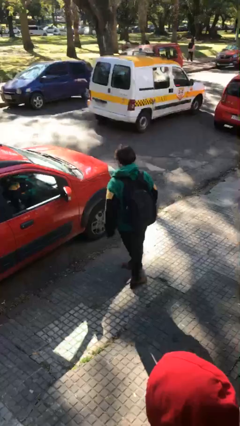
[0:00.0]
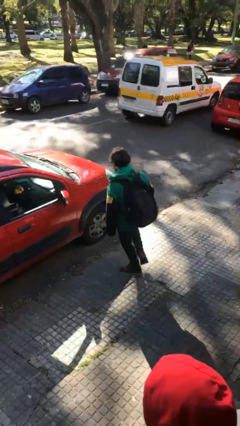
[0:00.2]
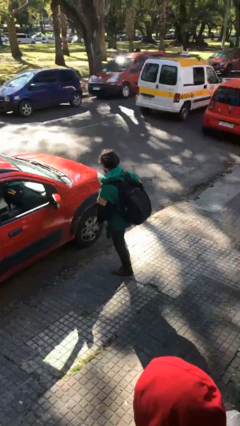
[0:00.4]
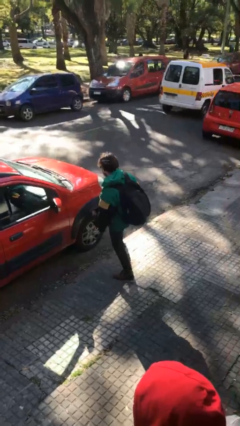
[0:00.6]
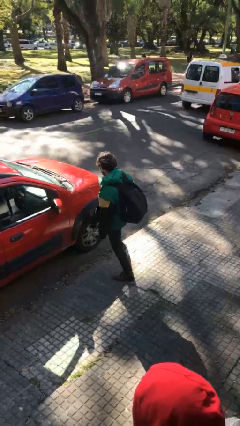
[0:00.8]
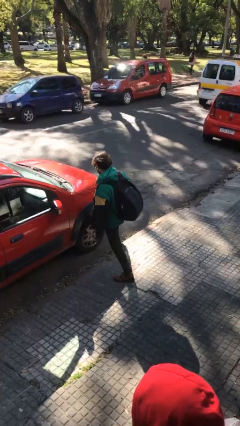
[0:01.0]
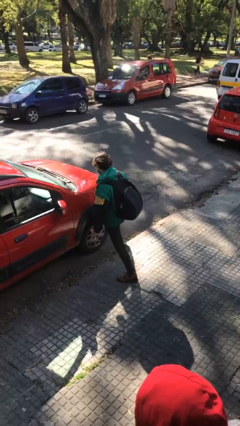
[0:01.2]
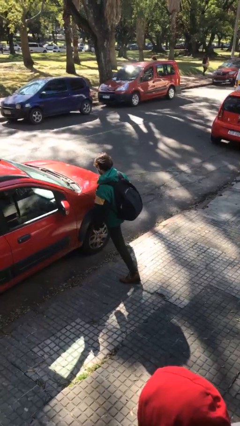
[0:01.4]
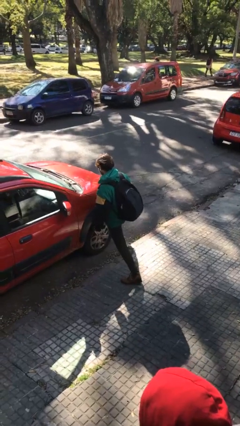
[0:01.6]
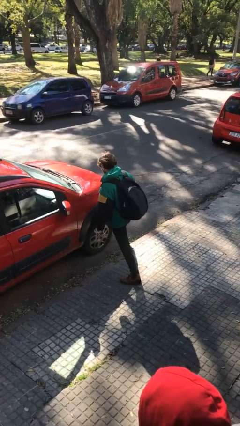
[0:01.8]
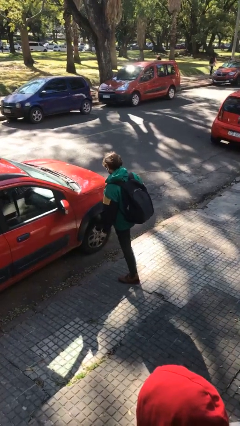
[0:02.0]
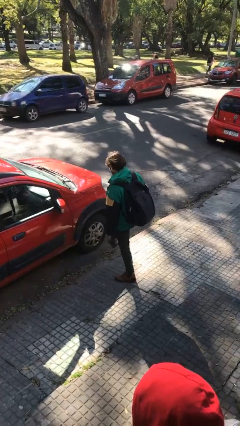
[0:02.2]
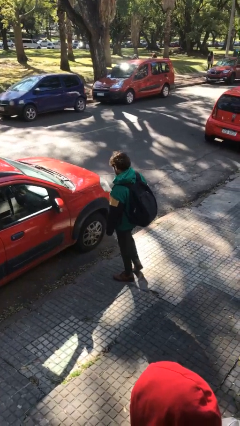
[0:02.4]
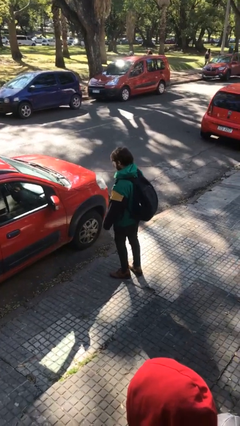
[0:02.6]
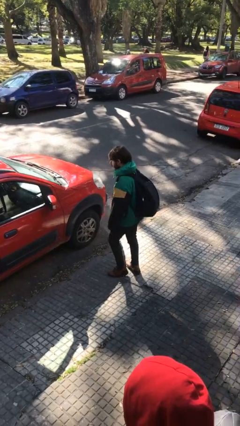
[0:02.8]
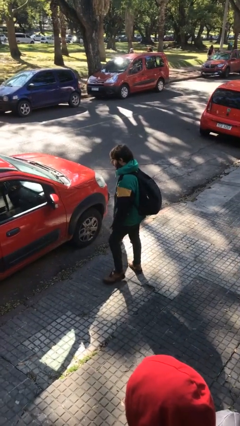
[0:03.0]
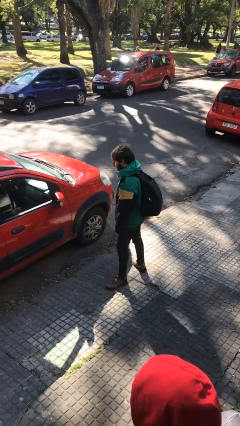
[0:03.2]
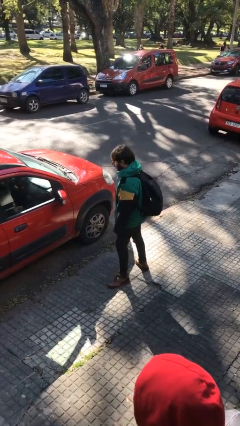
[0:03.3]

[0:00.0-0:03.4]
person kicks car tires

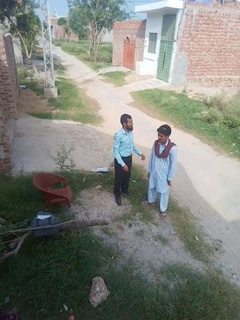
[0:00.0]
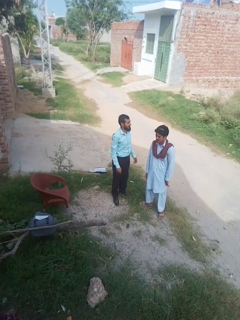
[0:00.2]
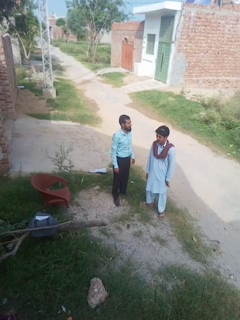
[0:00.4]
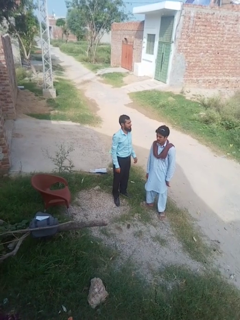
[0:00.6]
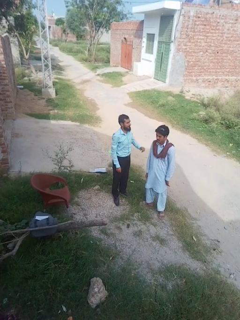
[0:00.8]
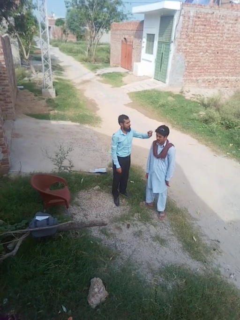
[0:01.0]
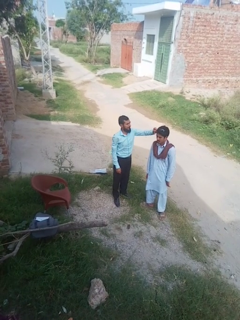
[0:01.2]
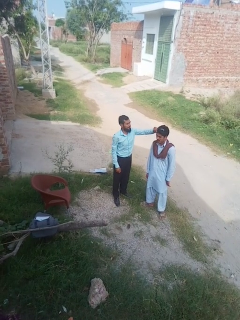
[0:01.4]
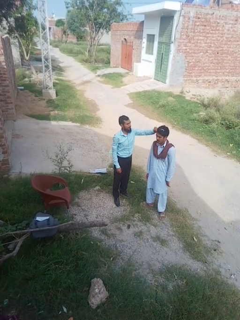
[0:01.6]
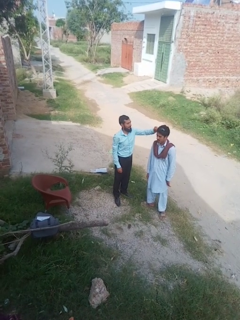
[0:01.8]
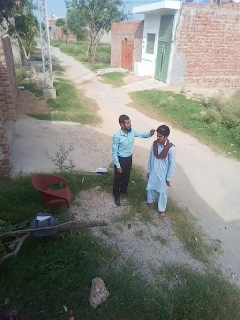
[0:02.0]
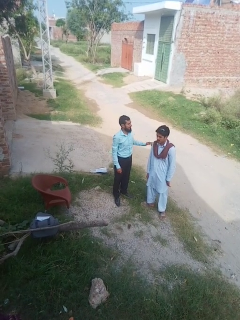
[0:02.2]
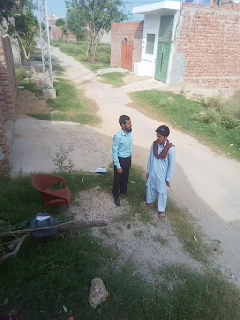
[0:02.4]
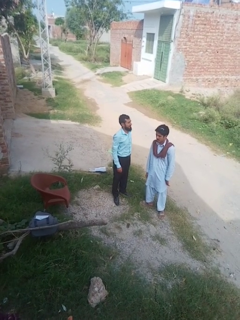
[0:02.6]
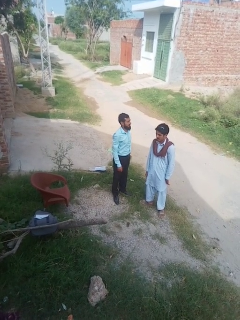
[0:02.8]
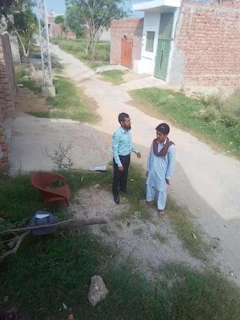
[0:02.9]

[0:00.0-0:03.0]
person grabs person by hair

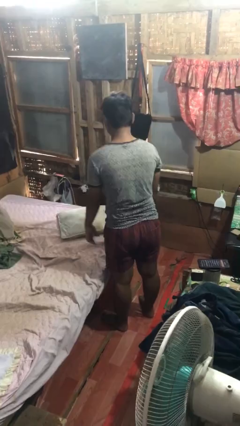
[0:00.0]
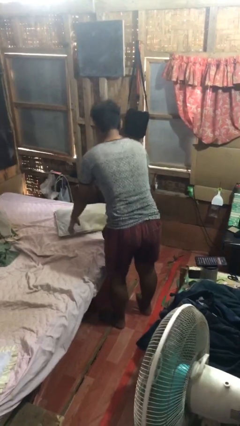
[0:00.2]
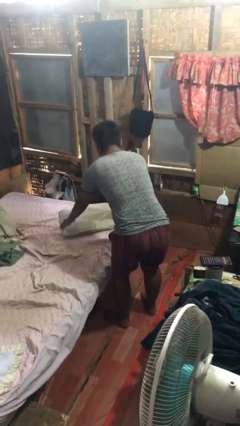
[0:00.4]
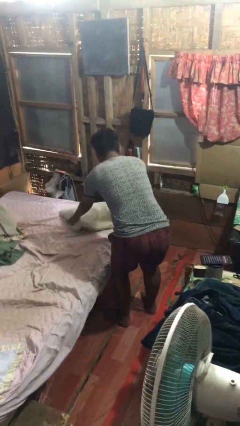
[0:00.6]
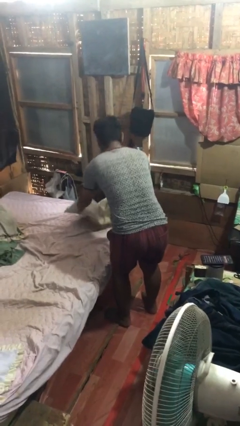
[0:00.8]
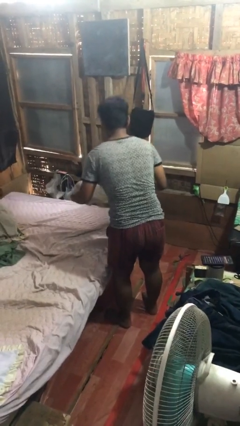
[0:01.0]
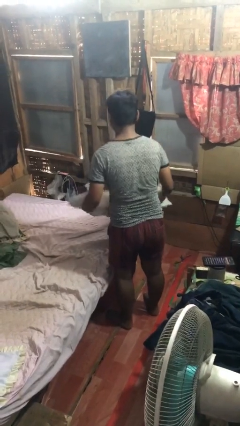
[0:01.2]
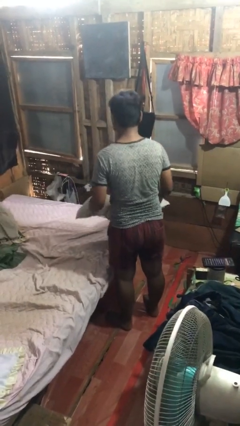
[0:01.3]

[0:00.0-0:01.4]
person picks up object from bed

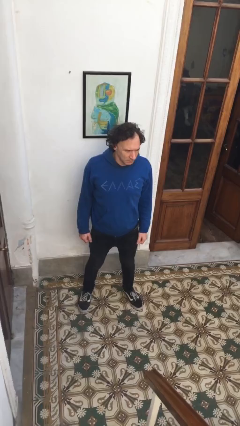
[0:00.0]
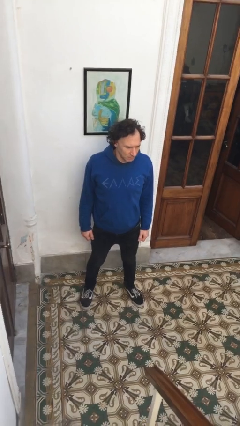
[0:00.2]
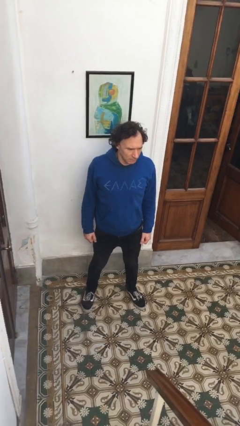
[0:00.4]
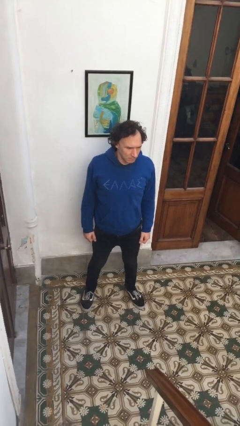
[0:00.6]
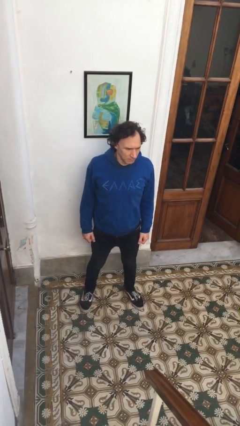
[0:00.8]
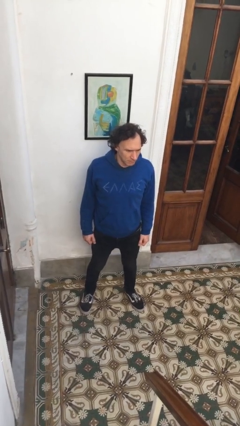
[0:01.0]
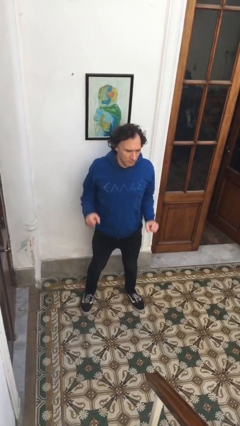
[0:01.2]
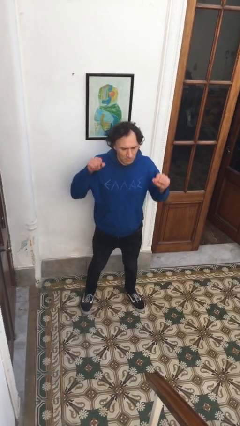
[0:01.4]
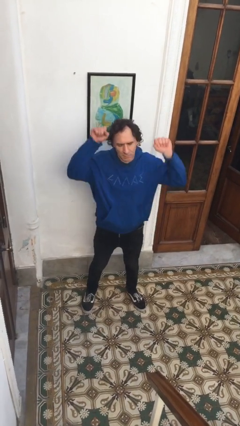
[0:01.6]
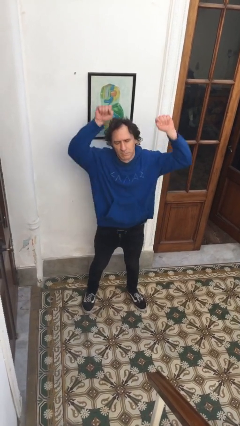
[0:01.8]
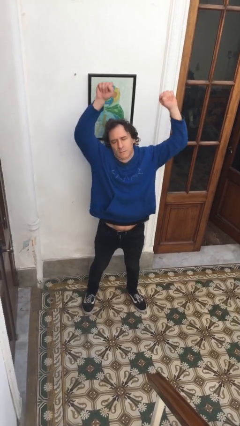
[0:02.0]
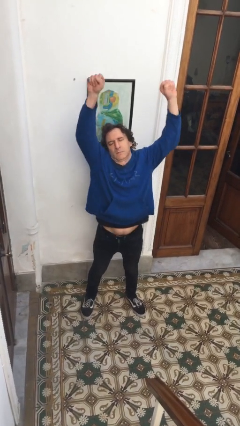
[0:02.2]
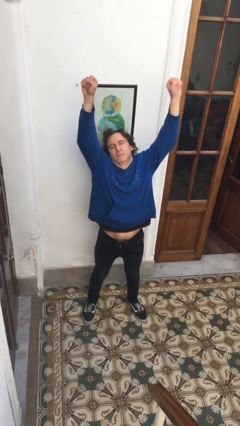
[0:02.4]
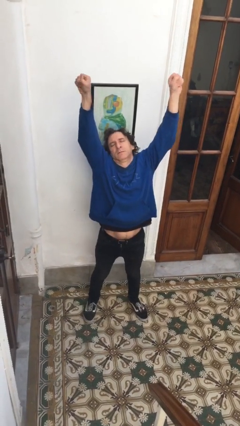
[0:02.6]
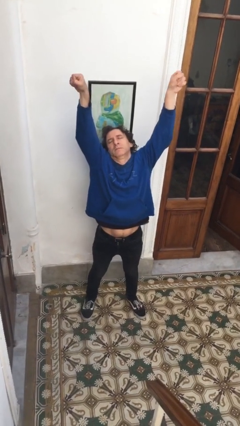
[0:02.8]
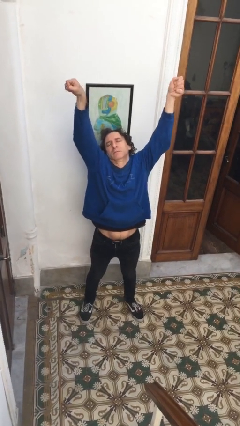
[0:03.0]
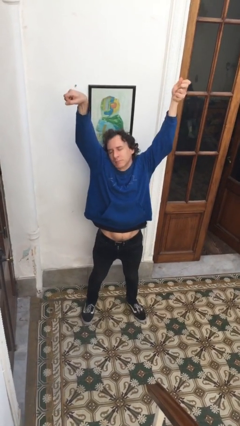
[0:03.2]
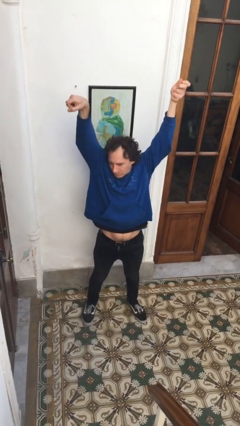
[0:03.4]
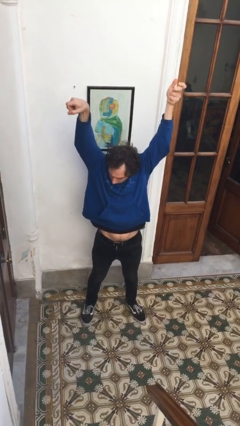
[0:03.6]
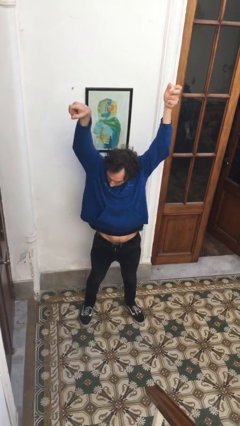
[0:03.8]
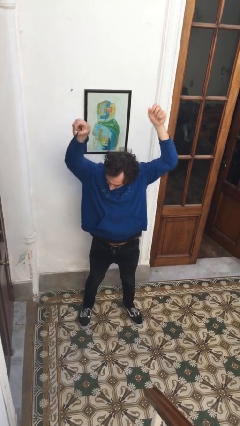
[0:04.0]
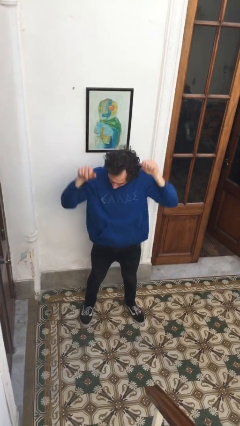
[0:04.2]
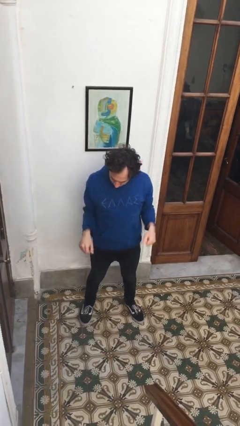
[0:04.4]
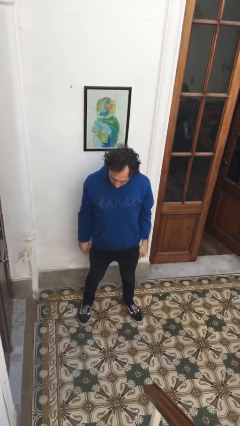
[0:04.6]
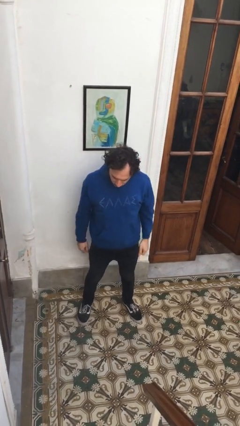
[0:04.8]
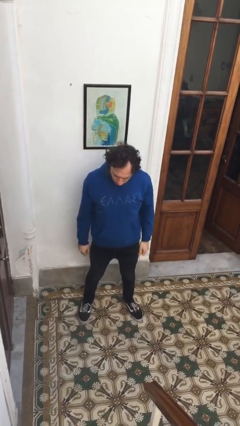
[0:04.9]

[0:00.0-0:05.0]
person stretches arms over head

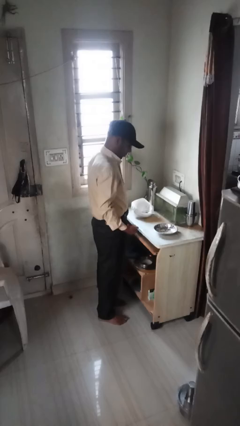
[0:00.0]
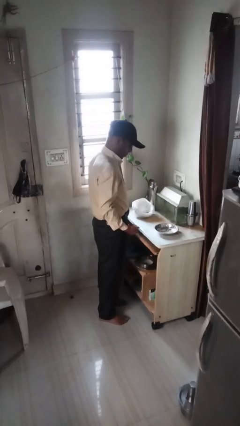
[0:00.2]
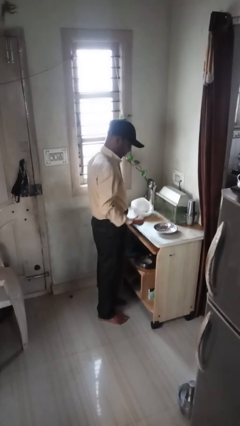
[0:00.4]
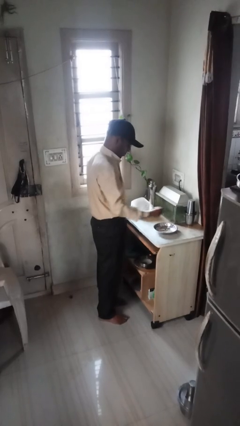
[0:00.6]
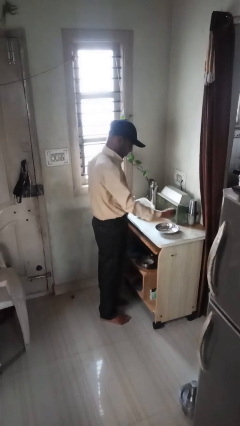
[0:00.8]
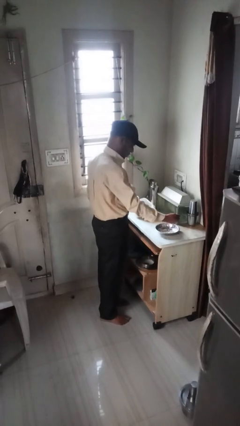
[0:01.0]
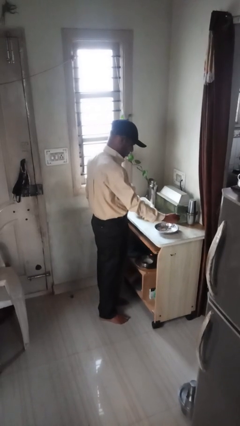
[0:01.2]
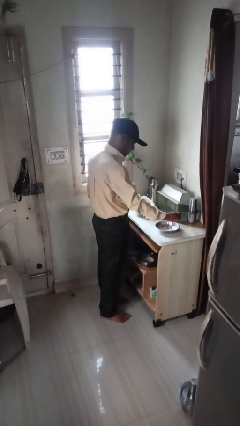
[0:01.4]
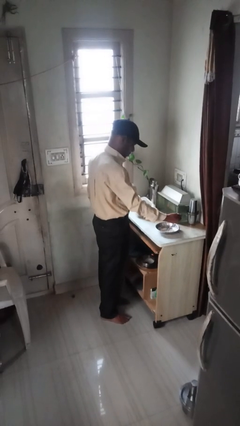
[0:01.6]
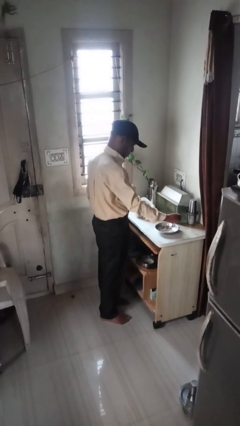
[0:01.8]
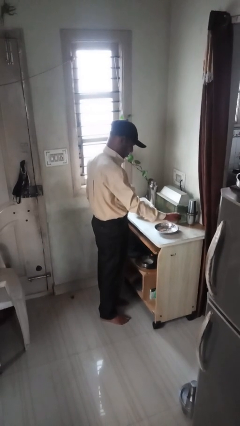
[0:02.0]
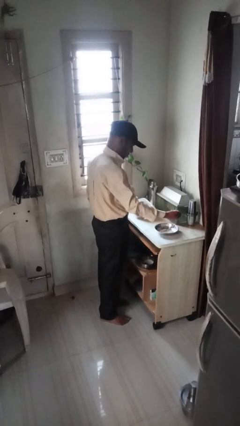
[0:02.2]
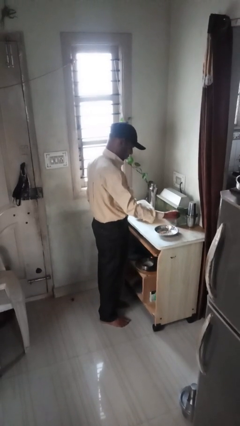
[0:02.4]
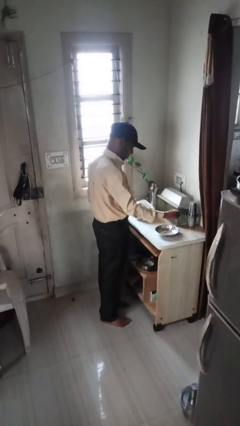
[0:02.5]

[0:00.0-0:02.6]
person pours into bowl

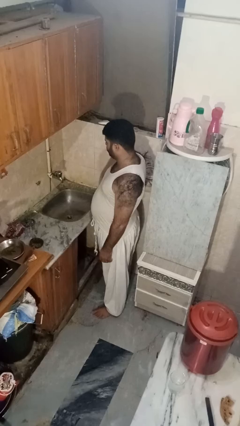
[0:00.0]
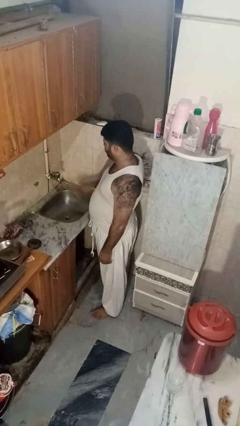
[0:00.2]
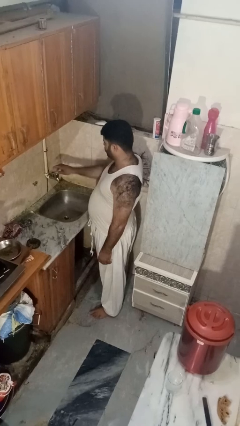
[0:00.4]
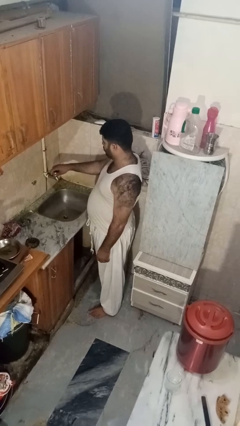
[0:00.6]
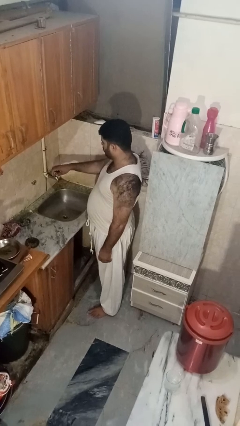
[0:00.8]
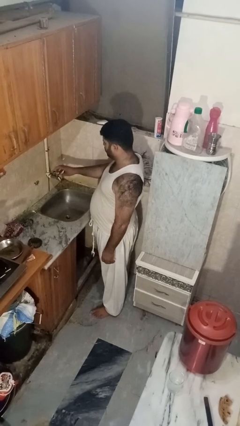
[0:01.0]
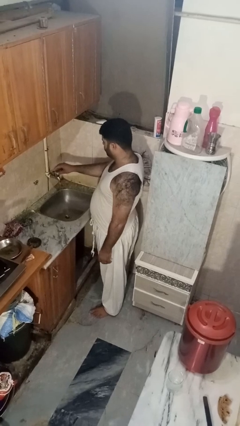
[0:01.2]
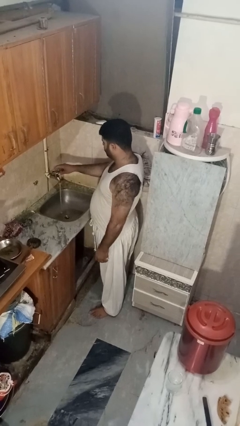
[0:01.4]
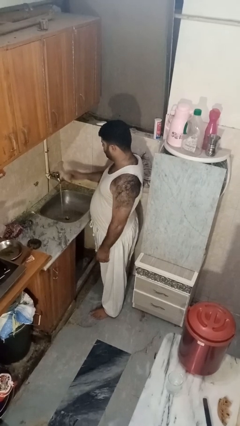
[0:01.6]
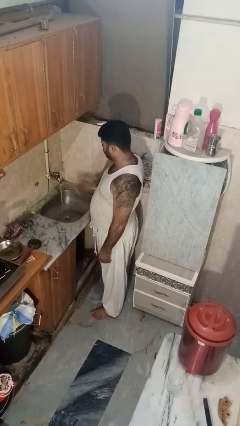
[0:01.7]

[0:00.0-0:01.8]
person turns on faucet

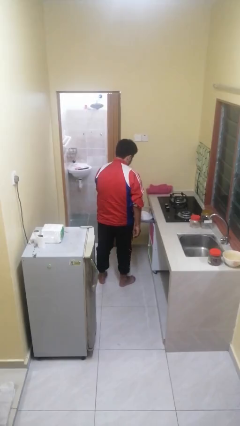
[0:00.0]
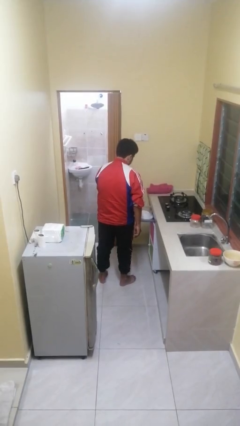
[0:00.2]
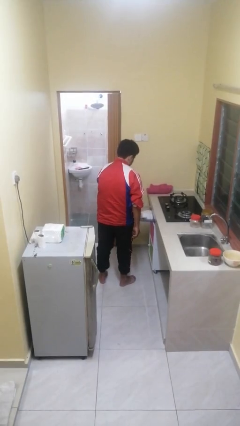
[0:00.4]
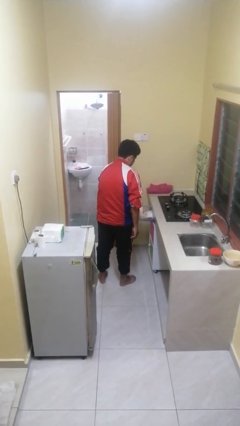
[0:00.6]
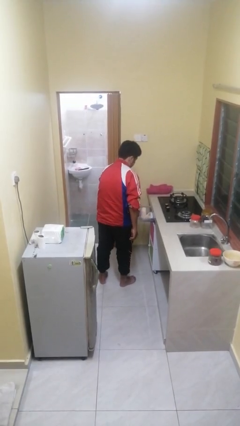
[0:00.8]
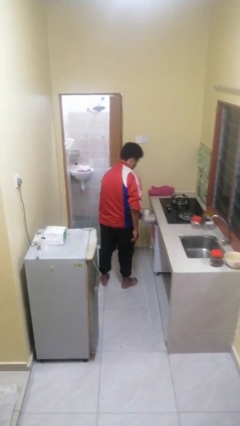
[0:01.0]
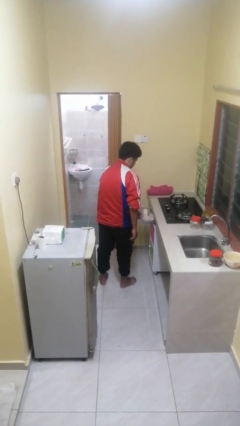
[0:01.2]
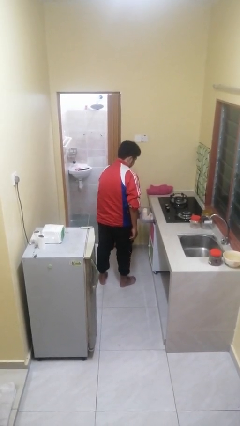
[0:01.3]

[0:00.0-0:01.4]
person closes kitchen drawer
